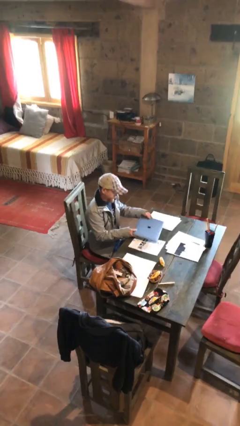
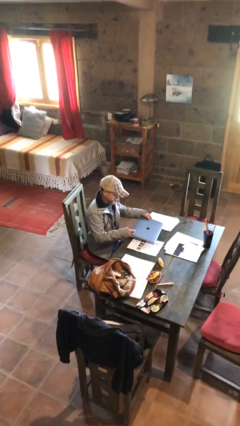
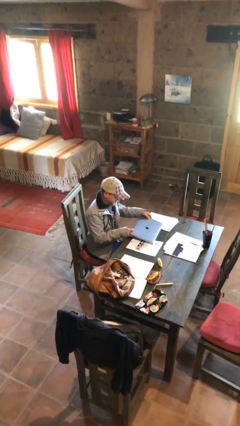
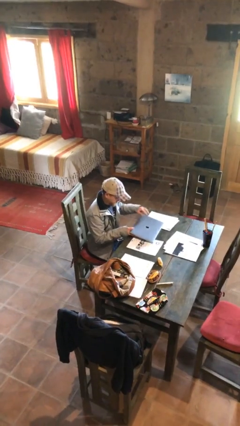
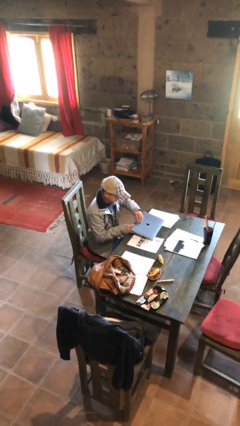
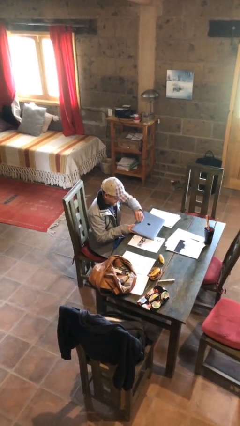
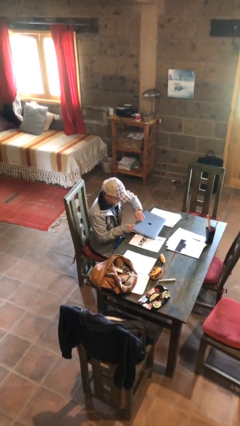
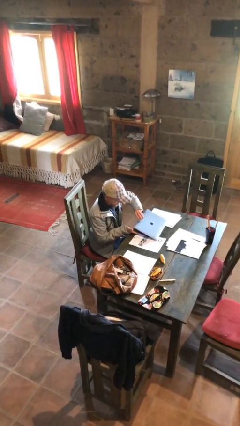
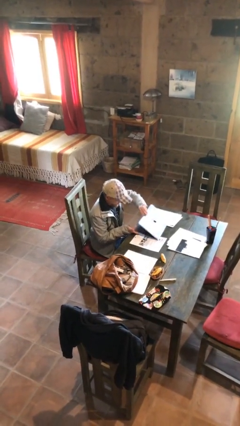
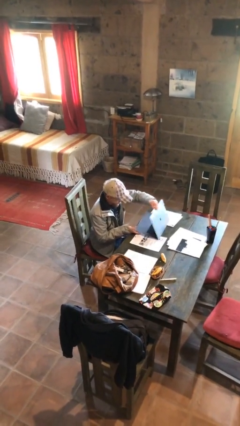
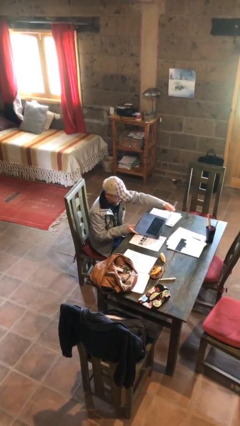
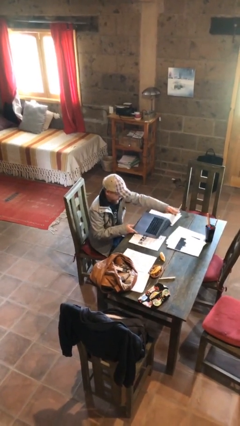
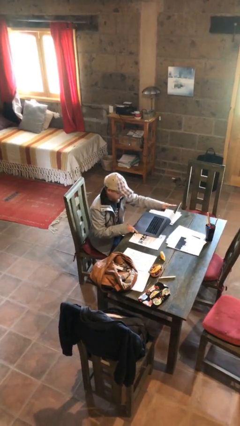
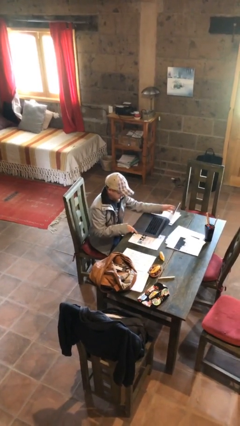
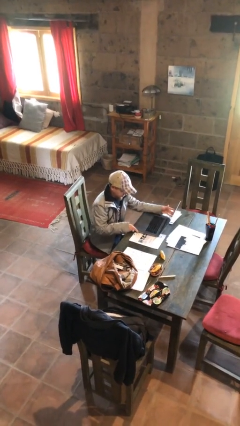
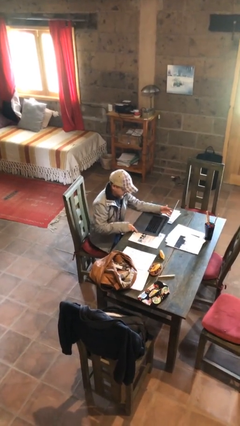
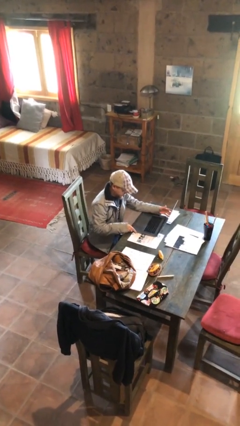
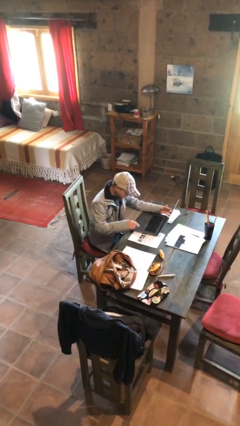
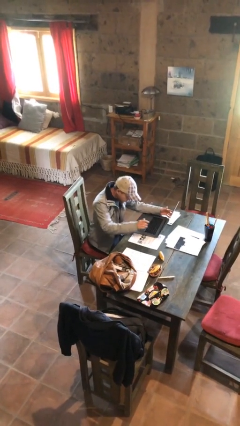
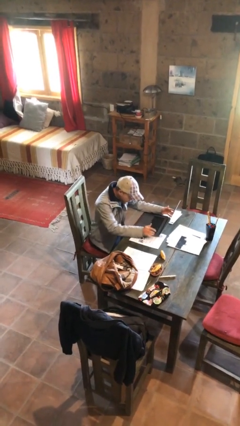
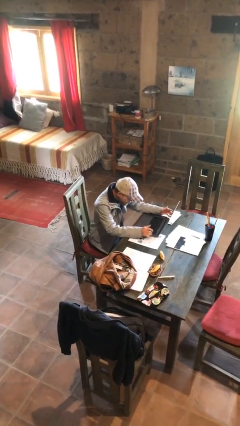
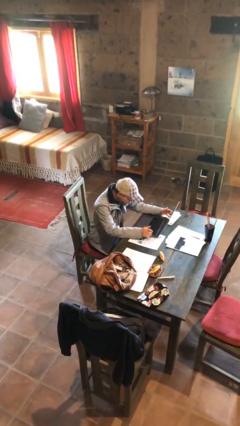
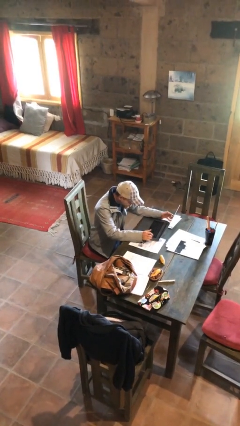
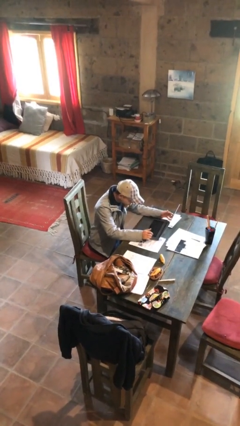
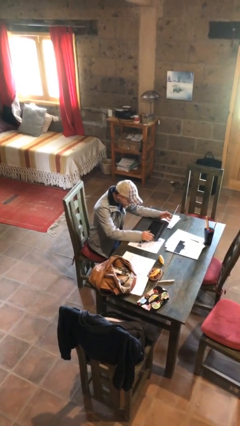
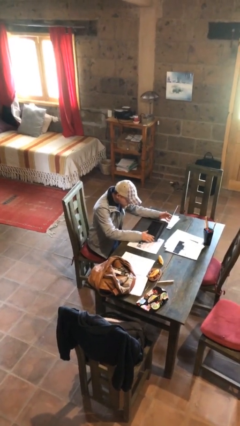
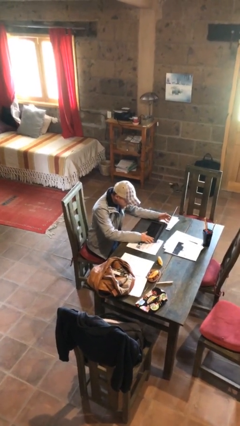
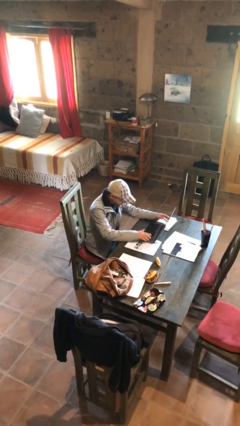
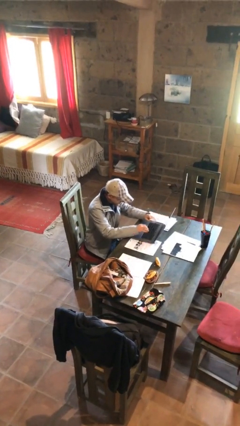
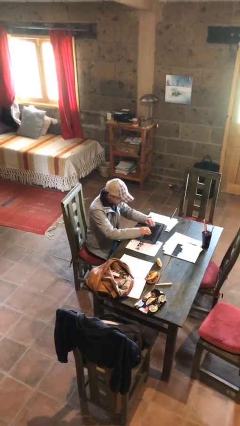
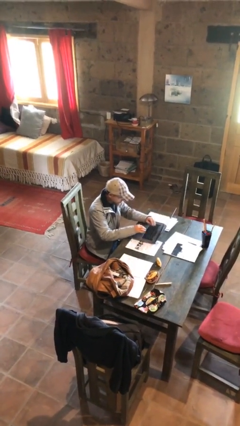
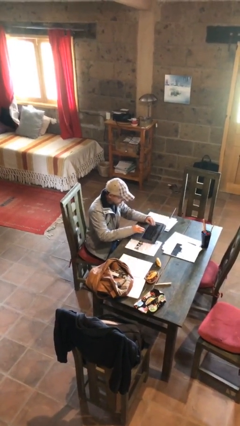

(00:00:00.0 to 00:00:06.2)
person interacts with laptop

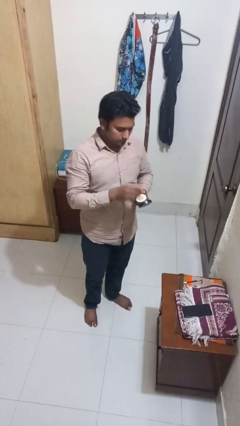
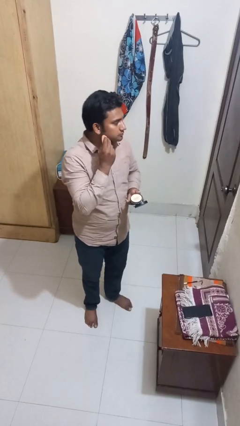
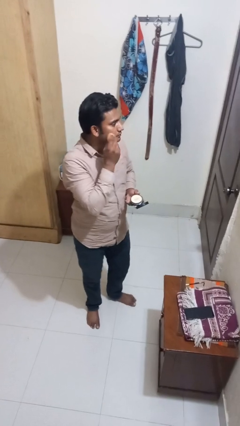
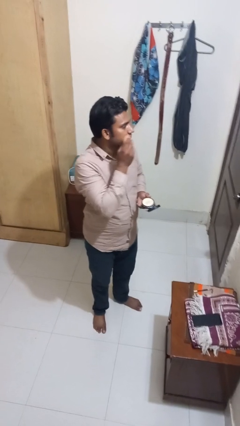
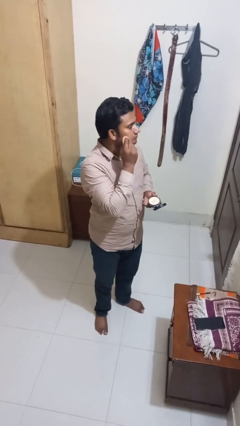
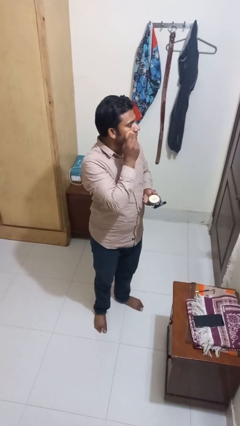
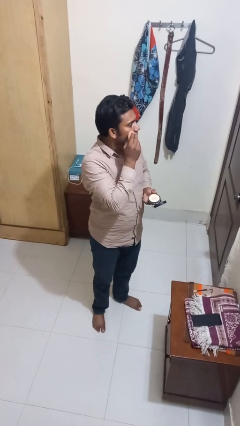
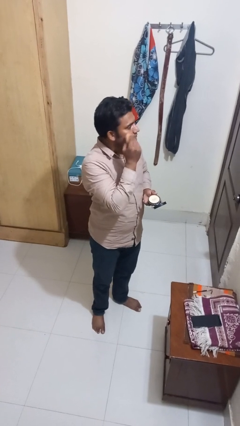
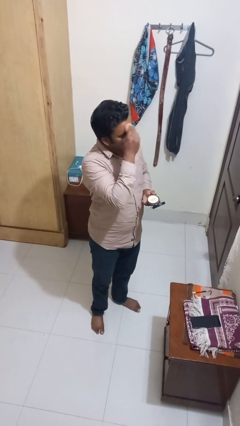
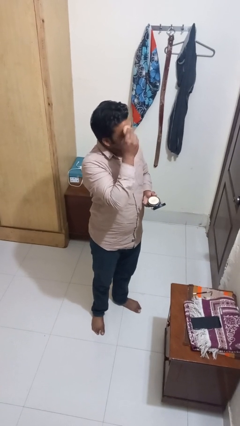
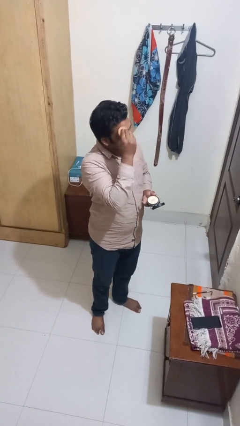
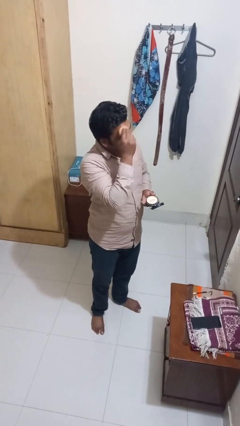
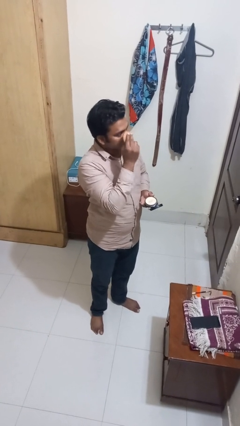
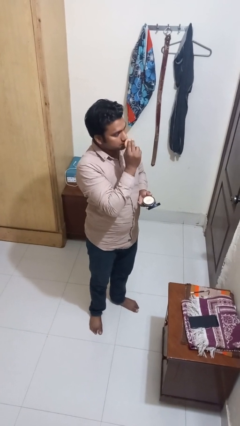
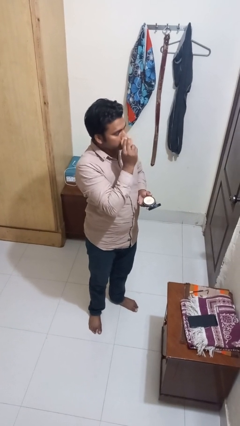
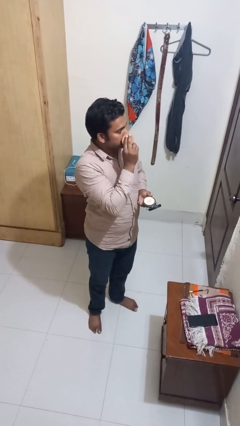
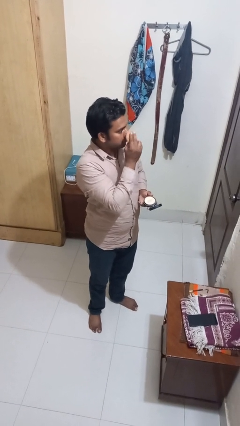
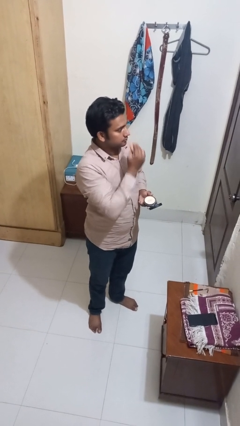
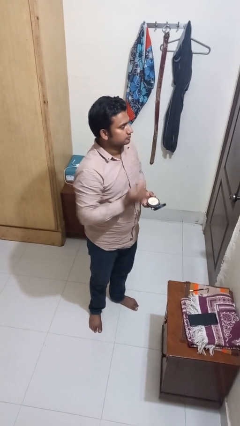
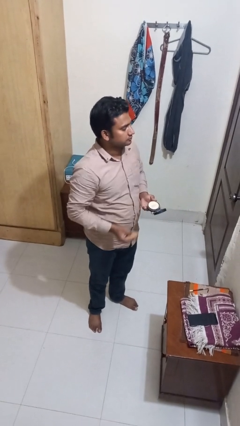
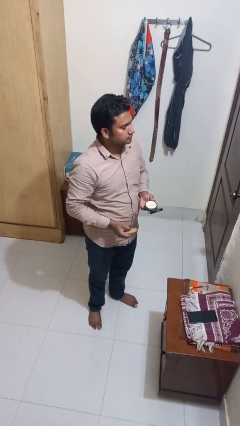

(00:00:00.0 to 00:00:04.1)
person applies foundation makeup

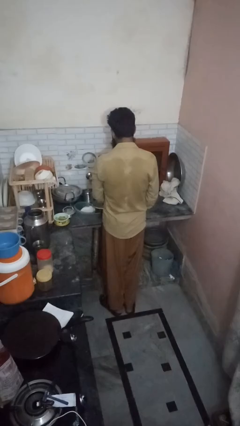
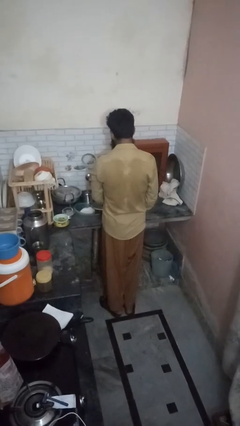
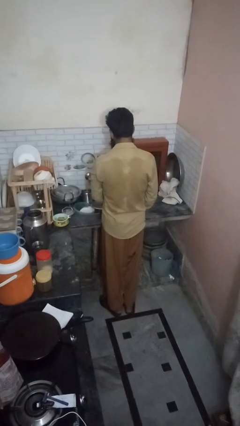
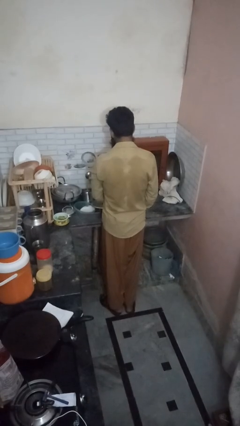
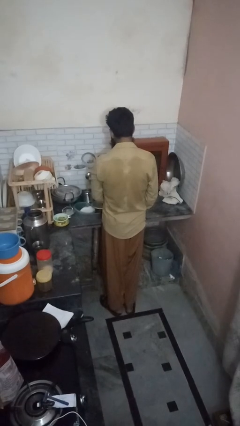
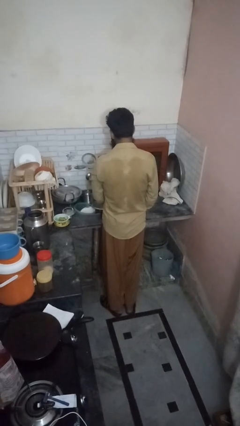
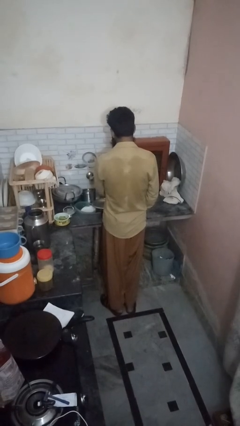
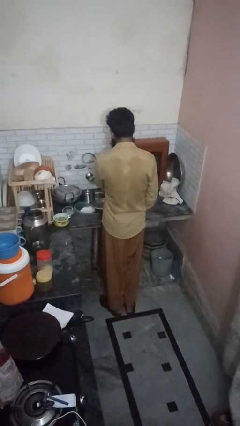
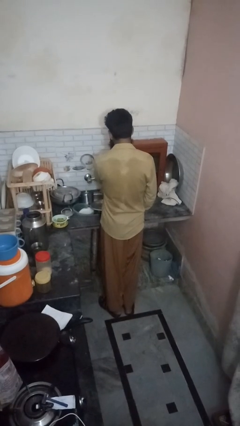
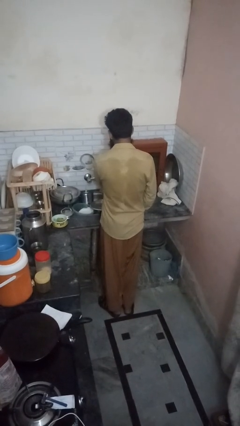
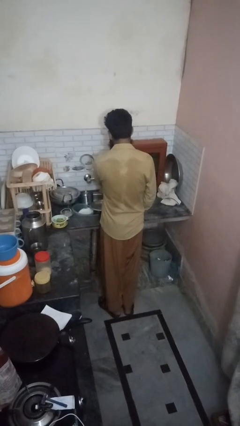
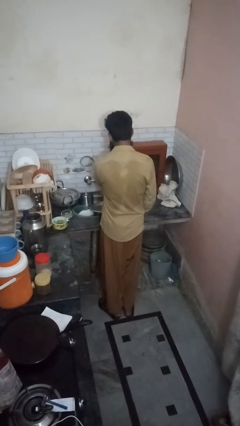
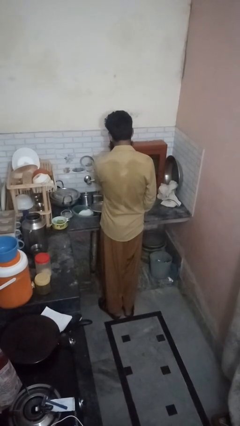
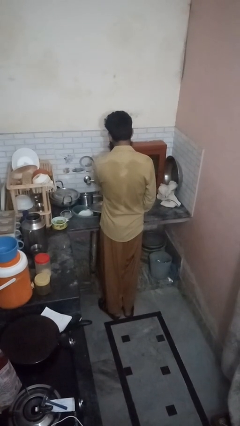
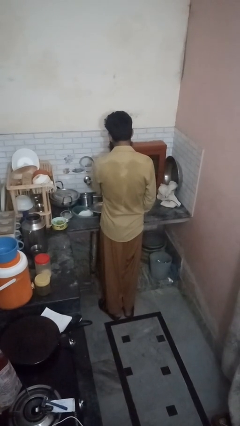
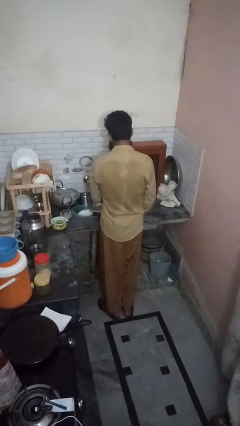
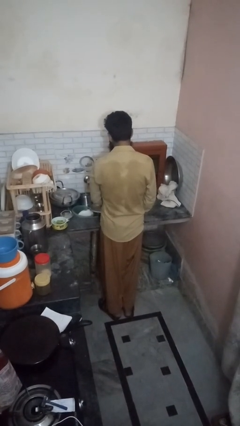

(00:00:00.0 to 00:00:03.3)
person opens dishwasher

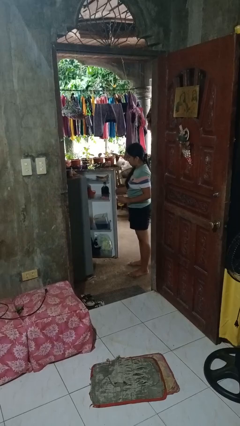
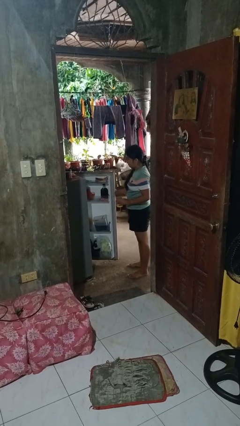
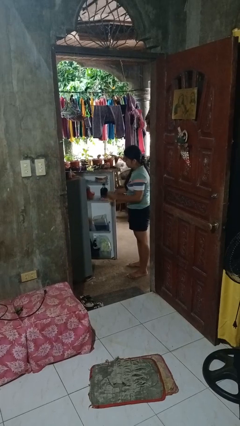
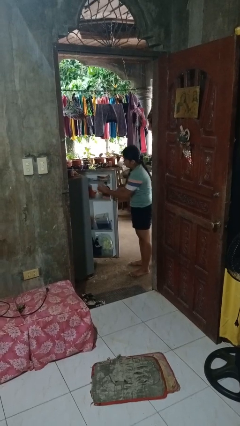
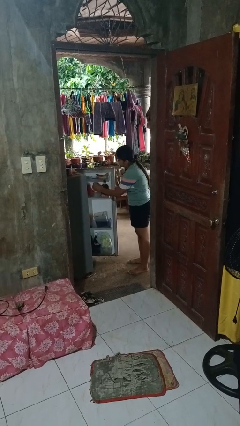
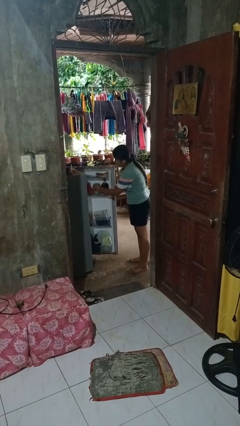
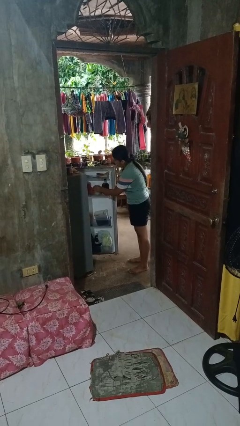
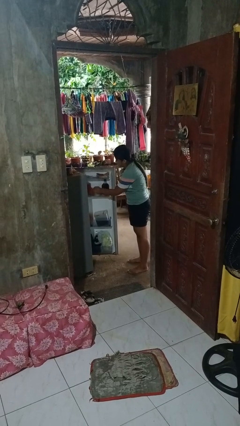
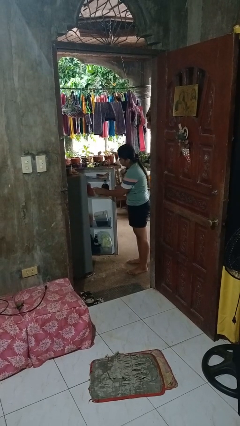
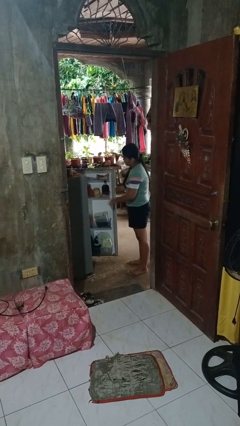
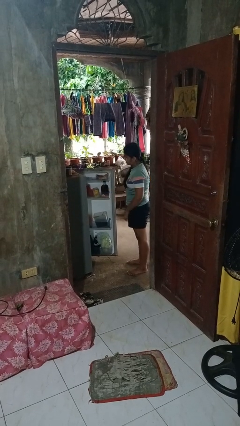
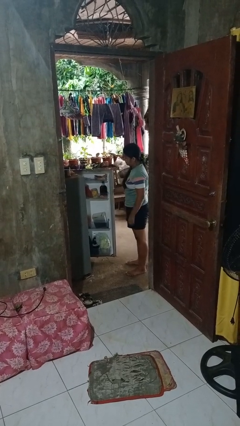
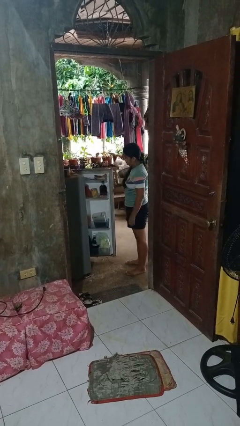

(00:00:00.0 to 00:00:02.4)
person puts object into refrigerator

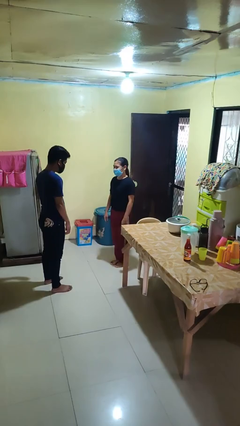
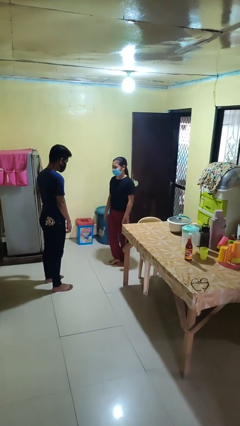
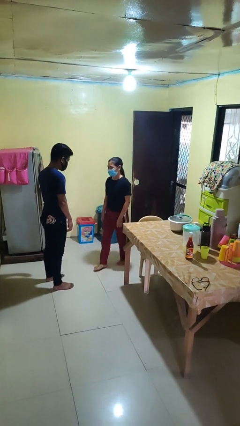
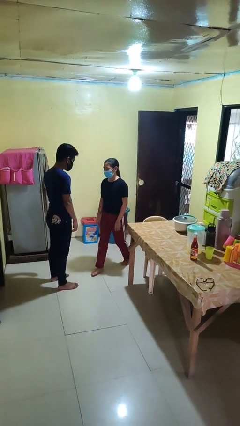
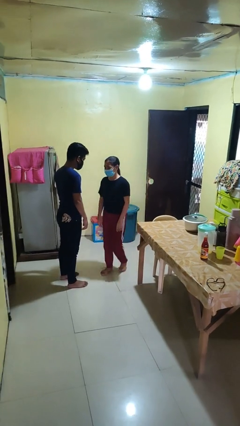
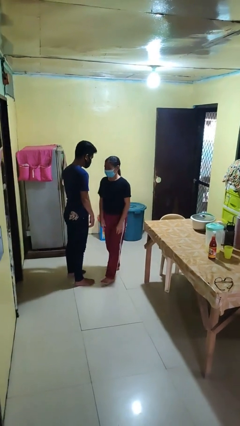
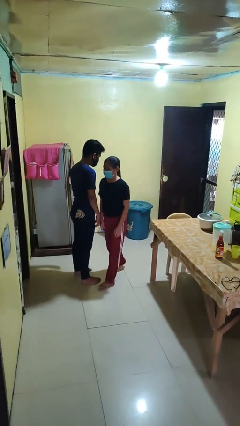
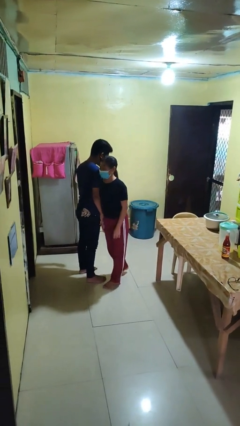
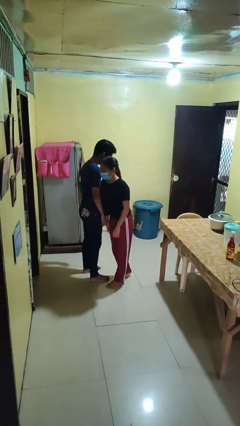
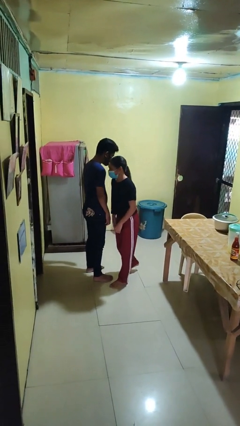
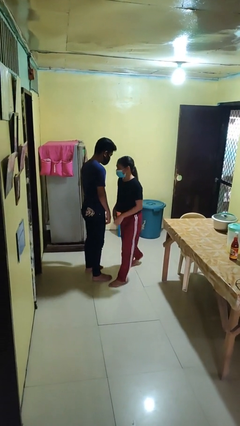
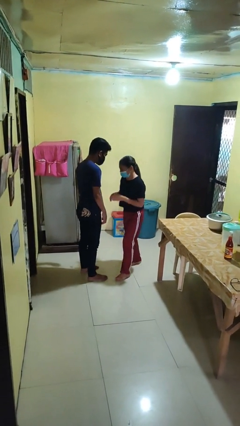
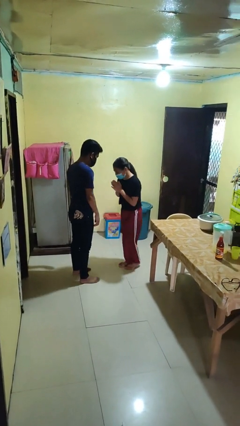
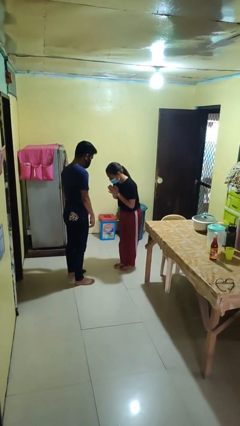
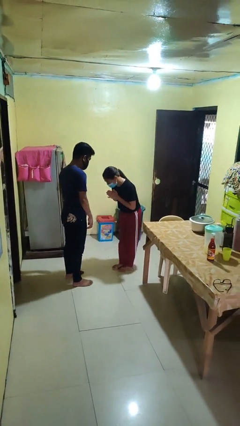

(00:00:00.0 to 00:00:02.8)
person bumps into person
